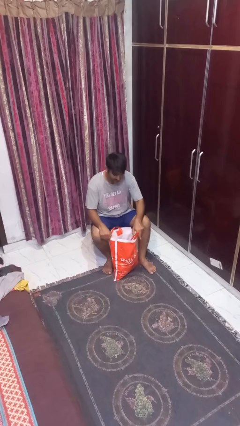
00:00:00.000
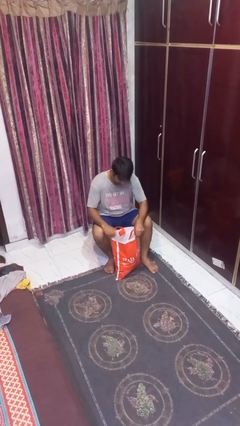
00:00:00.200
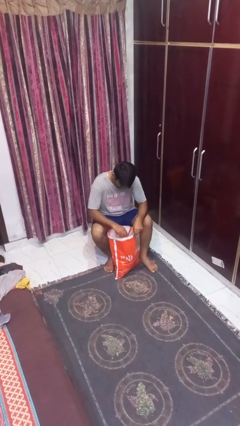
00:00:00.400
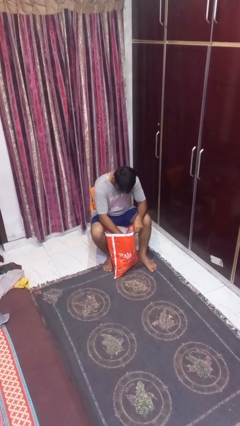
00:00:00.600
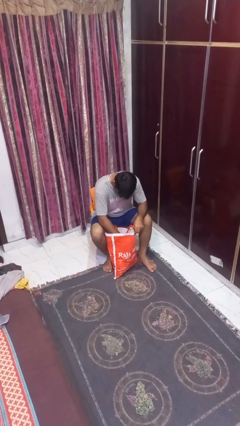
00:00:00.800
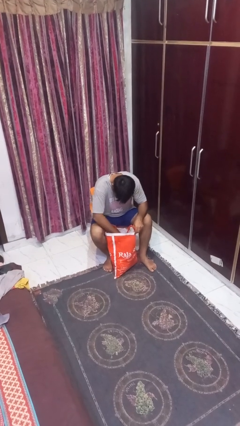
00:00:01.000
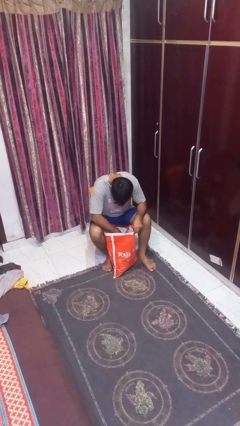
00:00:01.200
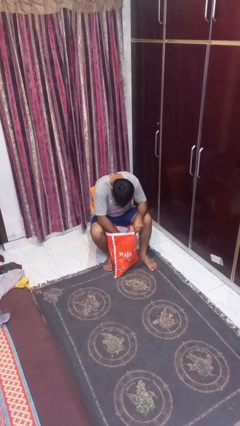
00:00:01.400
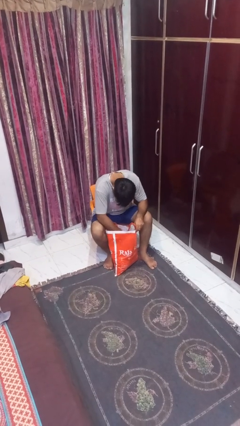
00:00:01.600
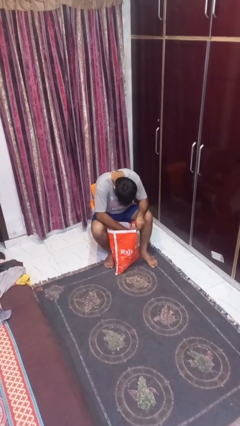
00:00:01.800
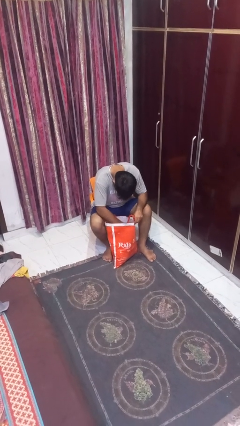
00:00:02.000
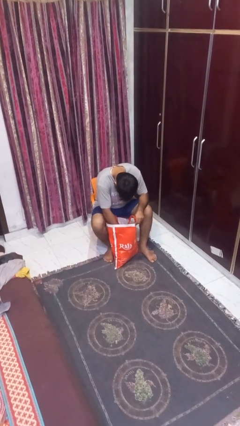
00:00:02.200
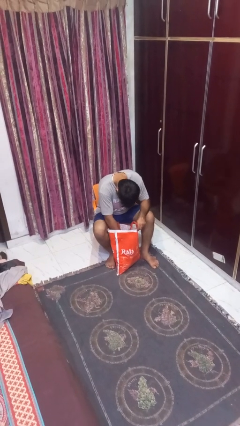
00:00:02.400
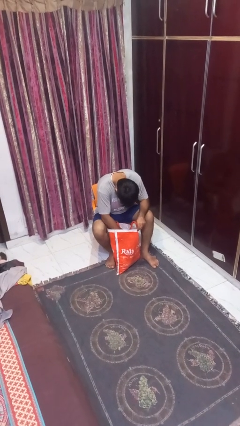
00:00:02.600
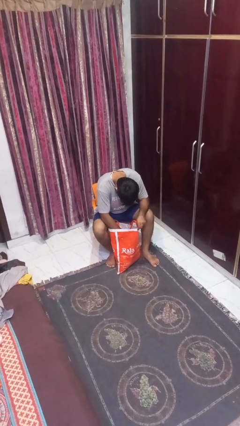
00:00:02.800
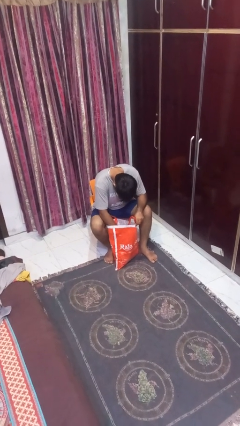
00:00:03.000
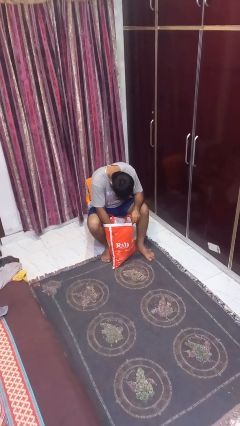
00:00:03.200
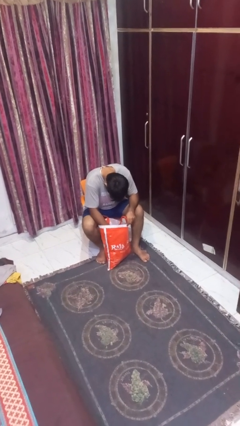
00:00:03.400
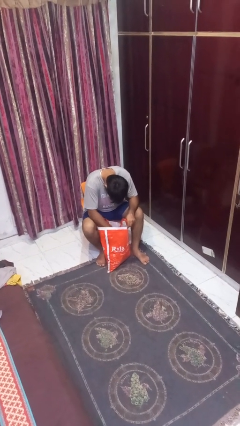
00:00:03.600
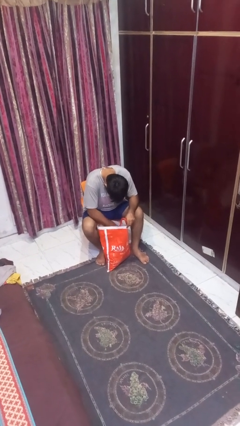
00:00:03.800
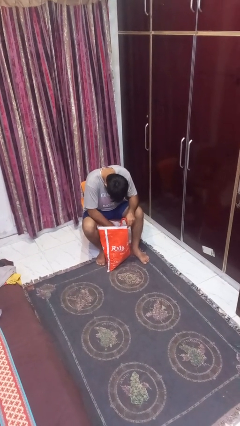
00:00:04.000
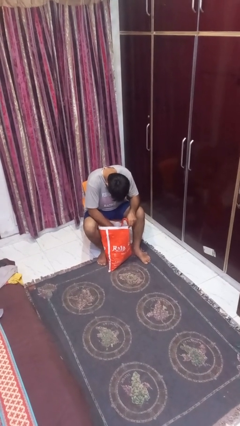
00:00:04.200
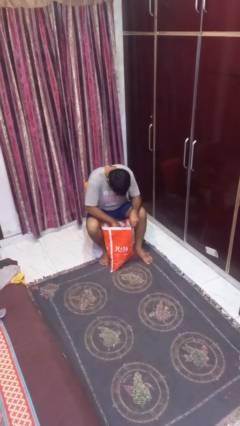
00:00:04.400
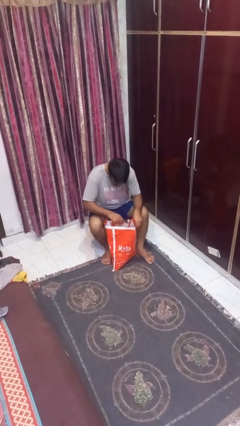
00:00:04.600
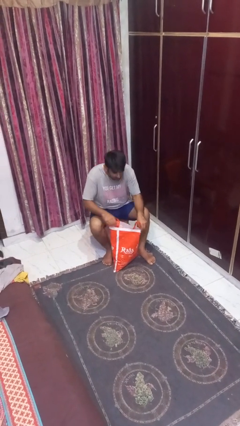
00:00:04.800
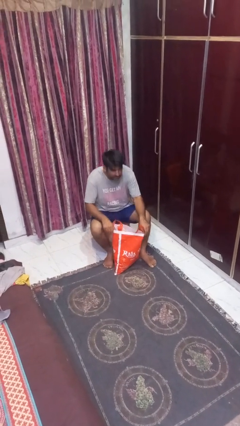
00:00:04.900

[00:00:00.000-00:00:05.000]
person searches in bag

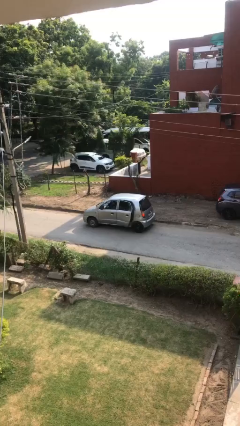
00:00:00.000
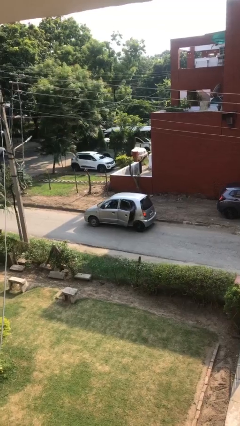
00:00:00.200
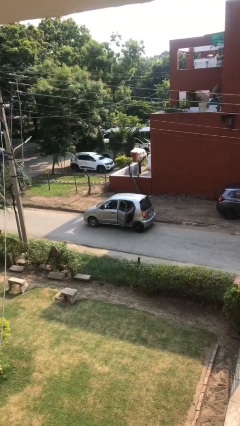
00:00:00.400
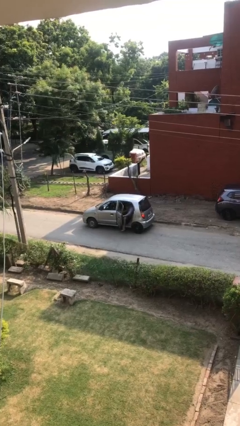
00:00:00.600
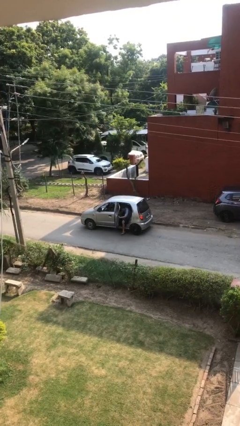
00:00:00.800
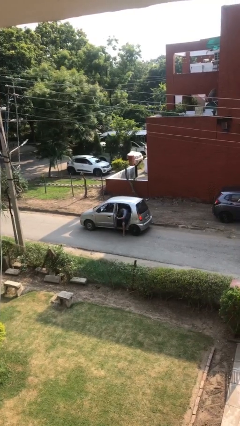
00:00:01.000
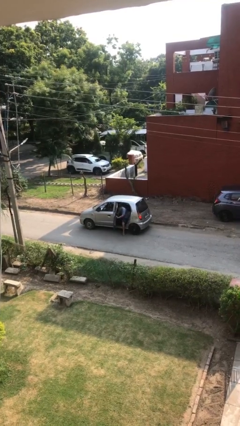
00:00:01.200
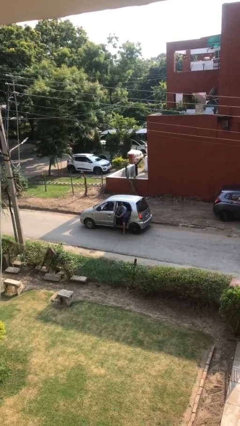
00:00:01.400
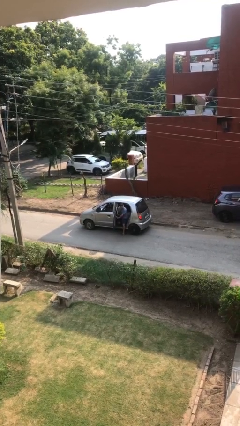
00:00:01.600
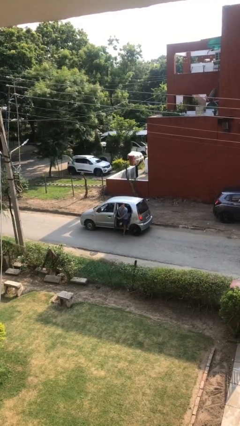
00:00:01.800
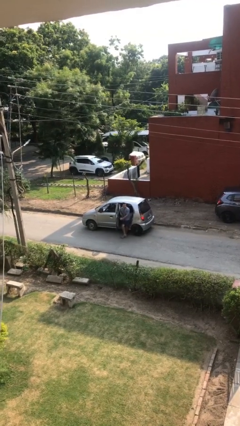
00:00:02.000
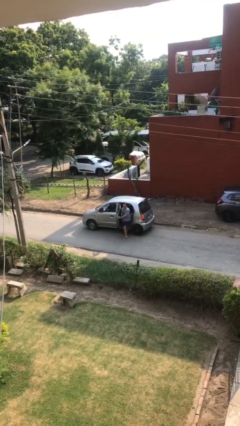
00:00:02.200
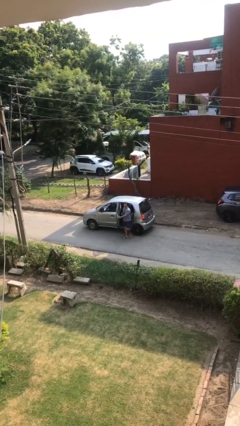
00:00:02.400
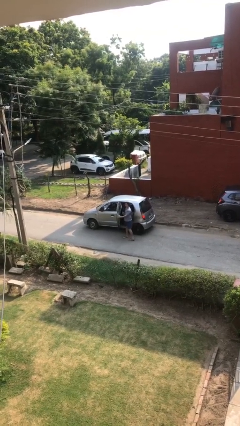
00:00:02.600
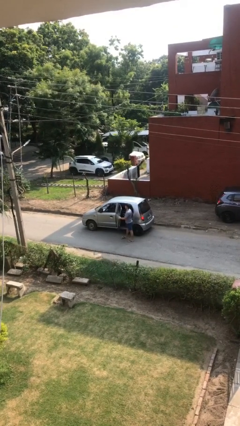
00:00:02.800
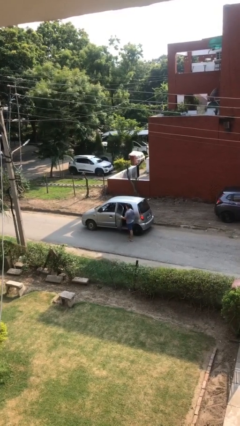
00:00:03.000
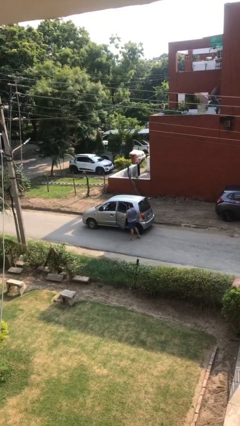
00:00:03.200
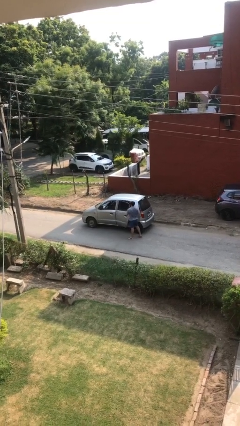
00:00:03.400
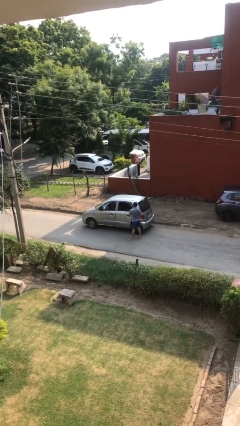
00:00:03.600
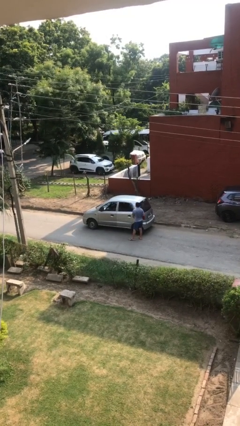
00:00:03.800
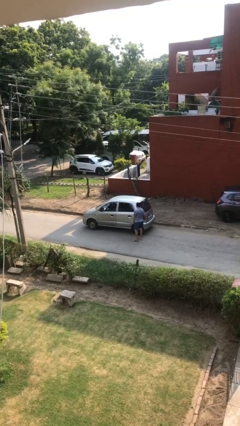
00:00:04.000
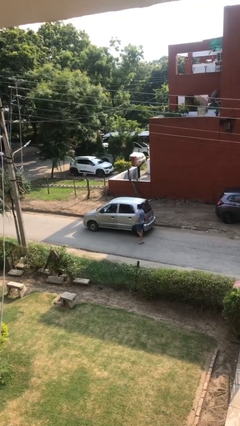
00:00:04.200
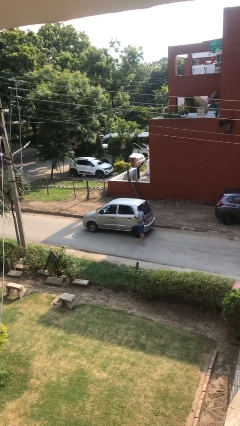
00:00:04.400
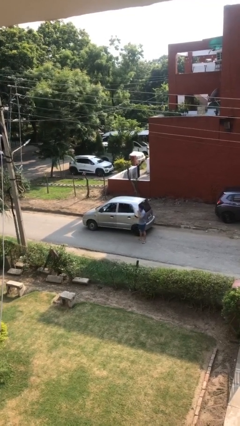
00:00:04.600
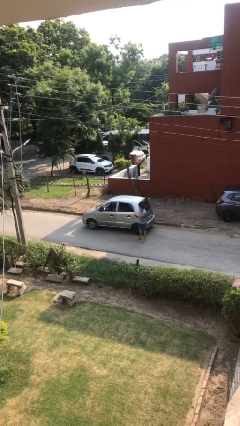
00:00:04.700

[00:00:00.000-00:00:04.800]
car drops off person

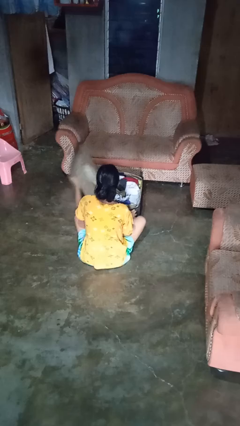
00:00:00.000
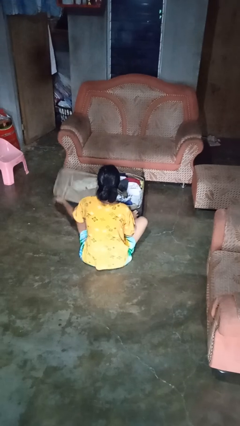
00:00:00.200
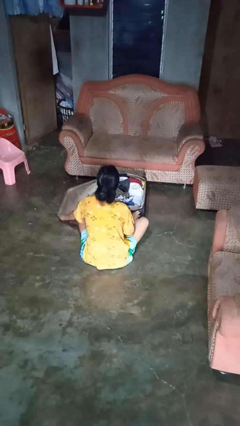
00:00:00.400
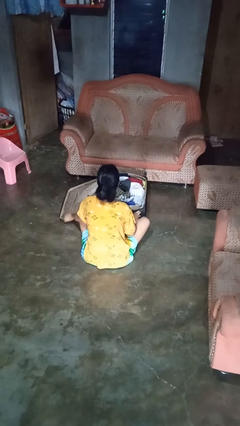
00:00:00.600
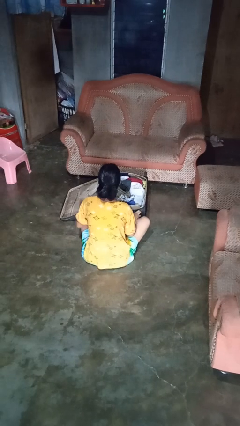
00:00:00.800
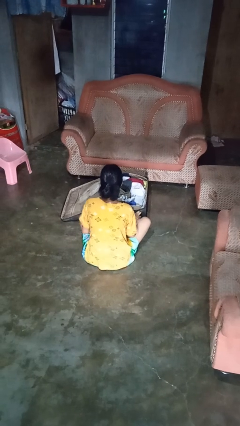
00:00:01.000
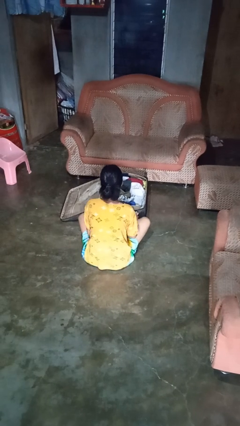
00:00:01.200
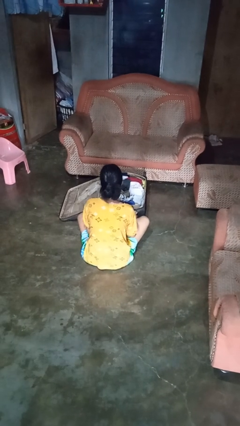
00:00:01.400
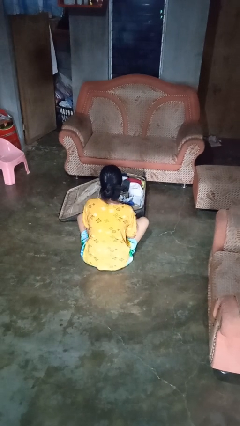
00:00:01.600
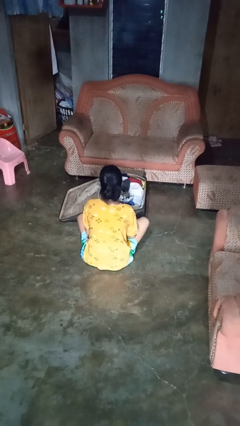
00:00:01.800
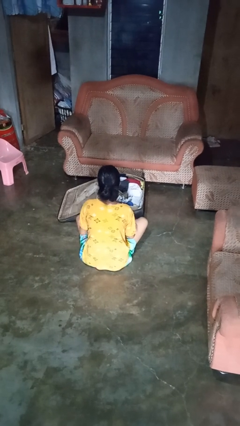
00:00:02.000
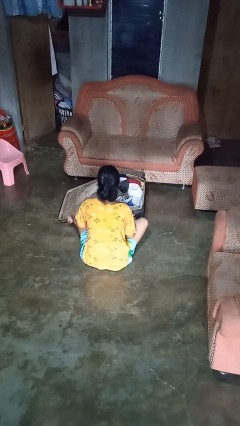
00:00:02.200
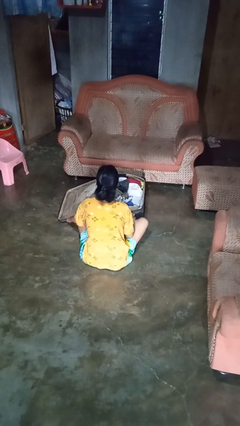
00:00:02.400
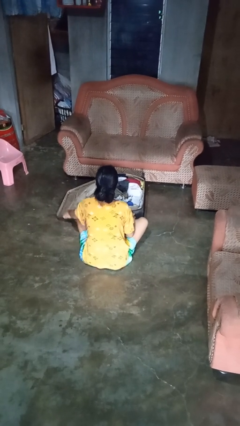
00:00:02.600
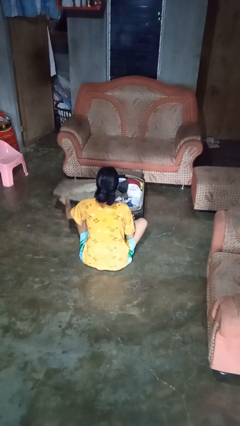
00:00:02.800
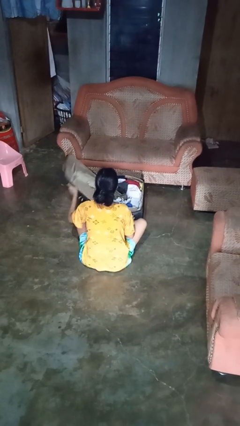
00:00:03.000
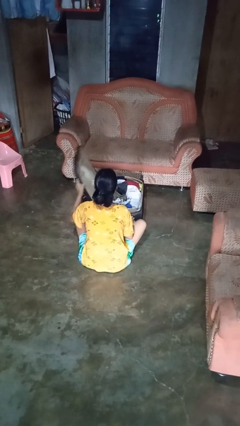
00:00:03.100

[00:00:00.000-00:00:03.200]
person opens suitcase

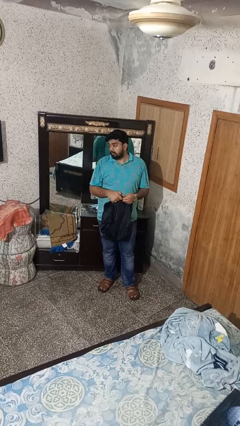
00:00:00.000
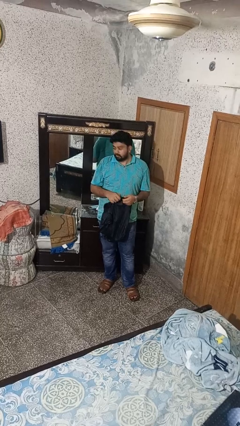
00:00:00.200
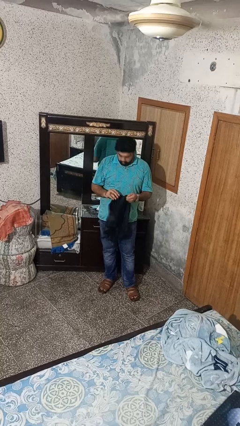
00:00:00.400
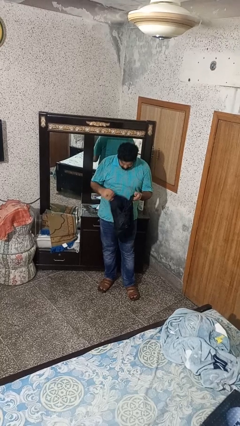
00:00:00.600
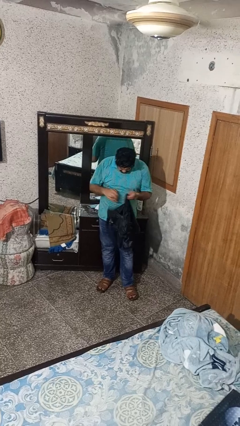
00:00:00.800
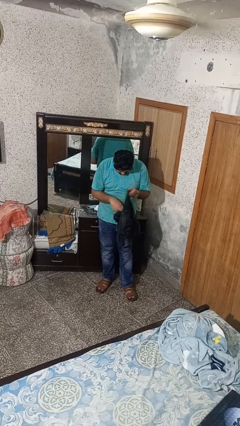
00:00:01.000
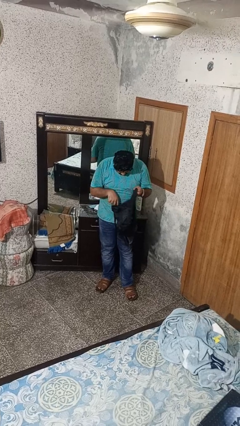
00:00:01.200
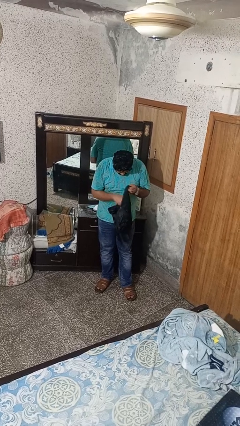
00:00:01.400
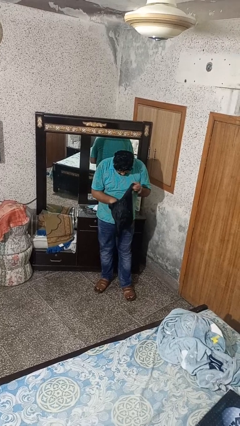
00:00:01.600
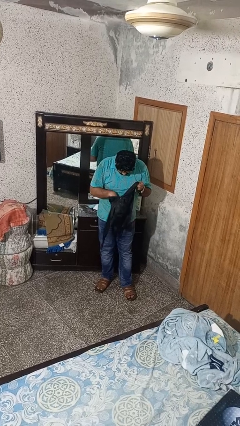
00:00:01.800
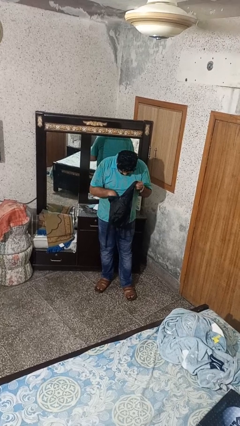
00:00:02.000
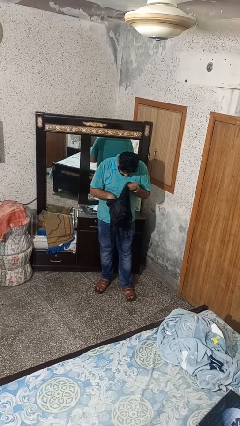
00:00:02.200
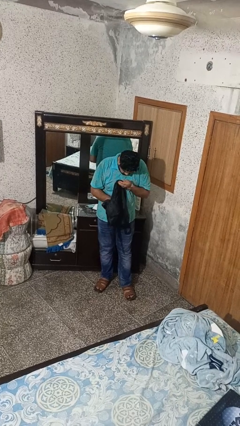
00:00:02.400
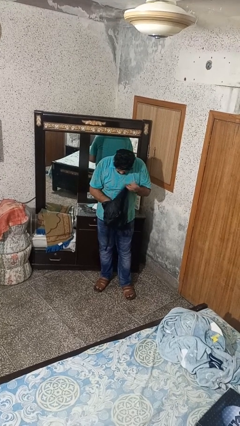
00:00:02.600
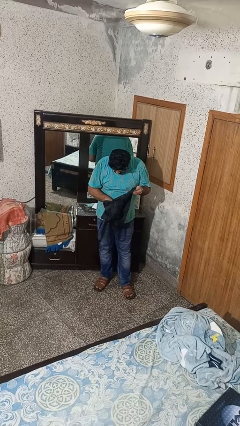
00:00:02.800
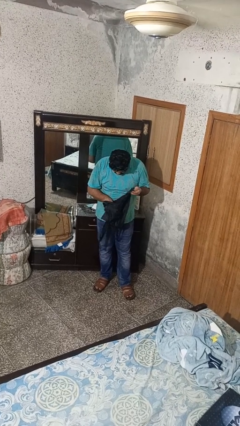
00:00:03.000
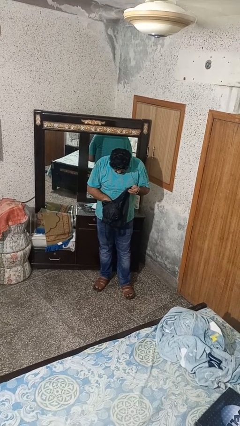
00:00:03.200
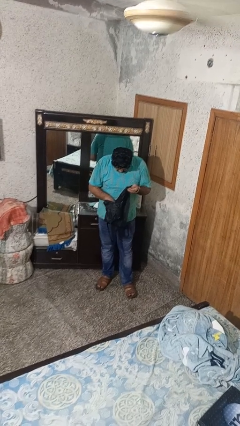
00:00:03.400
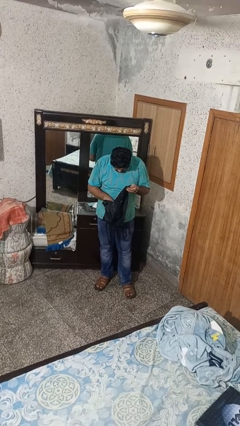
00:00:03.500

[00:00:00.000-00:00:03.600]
person searches in backpack

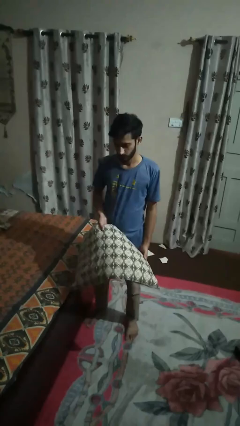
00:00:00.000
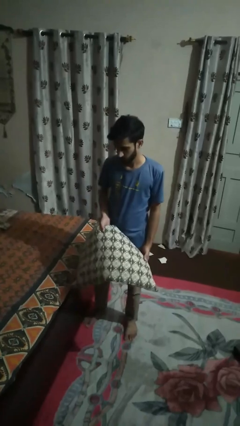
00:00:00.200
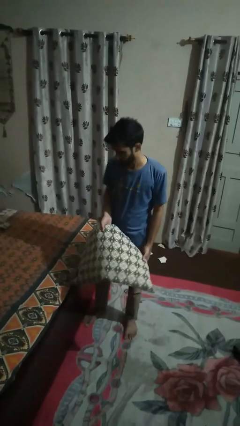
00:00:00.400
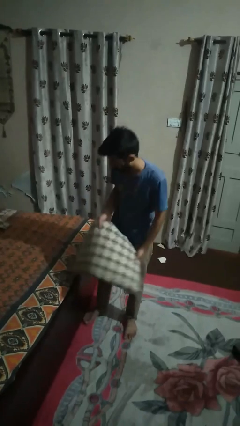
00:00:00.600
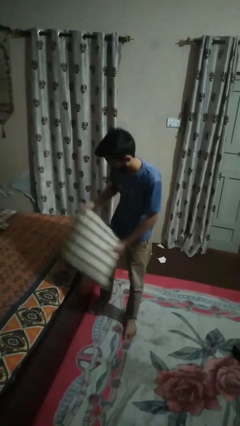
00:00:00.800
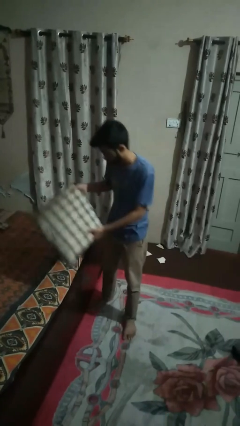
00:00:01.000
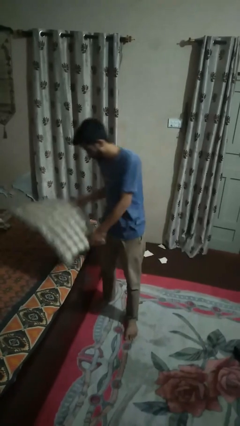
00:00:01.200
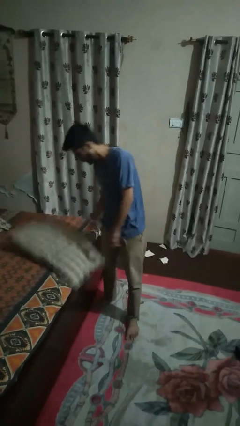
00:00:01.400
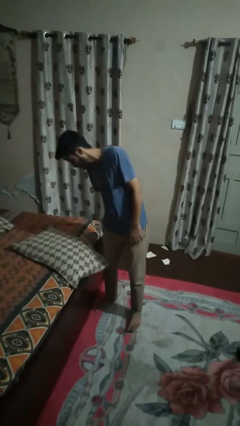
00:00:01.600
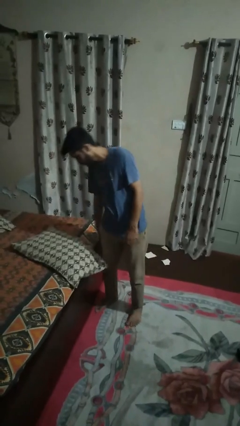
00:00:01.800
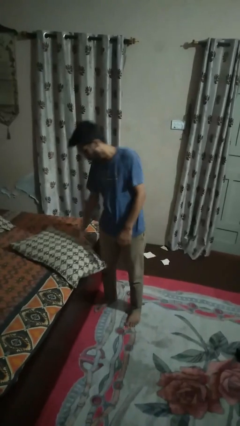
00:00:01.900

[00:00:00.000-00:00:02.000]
person puts down object on bed
